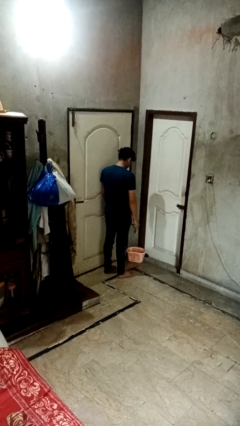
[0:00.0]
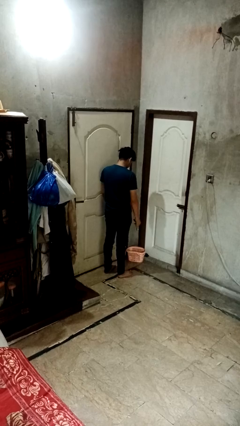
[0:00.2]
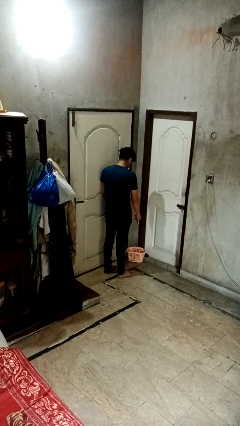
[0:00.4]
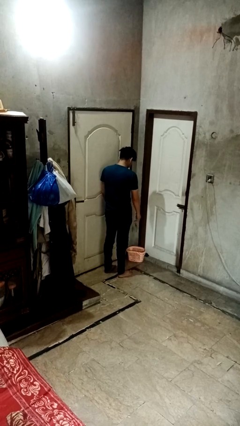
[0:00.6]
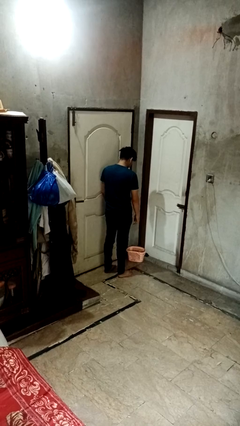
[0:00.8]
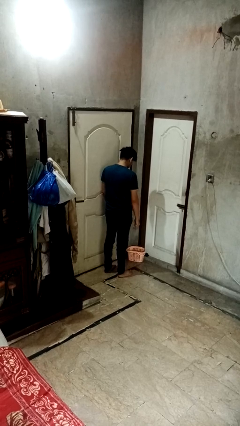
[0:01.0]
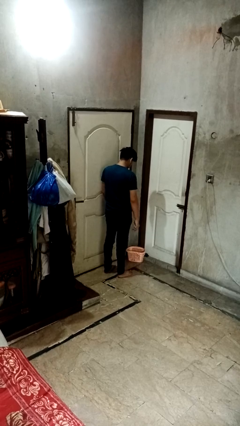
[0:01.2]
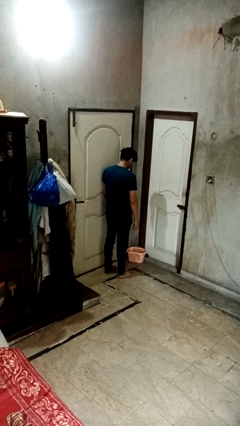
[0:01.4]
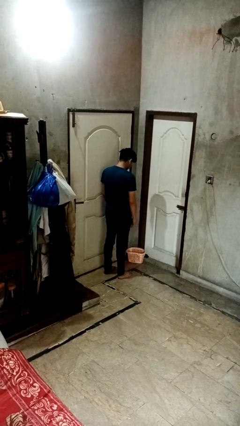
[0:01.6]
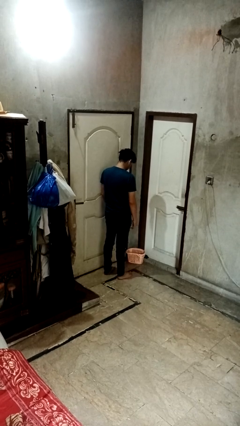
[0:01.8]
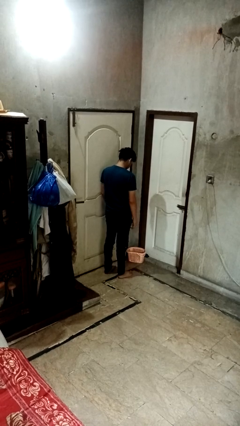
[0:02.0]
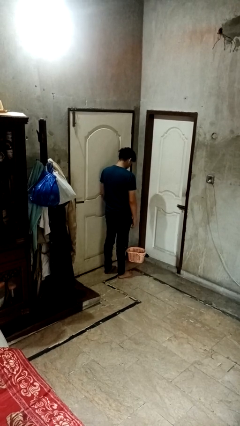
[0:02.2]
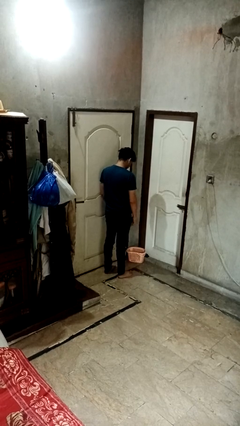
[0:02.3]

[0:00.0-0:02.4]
person discards trash

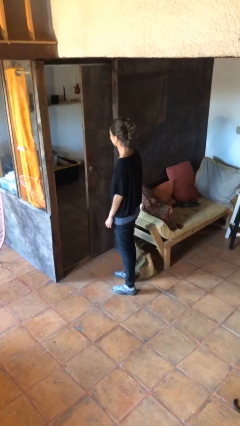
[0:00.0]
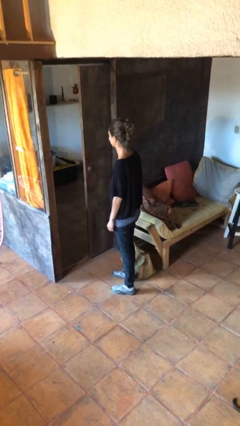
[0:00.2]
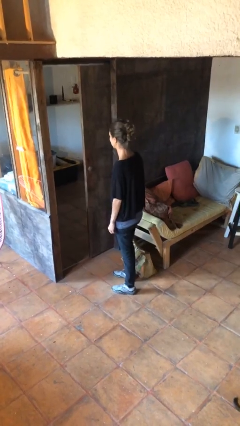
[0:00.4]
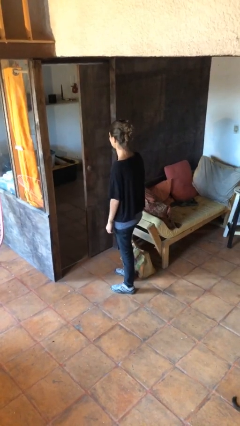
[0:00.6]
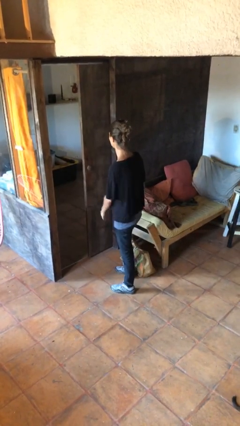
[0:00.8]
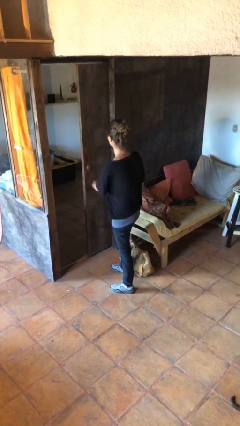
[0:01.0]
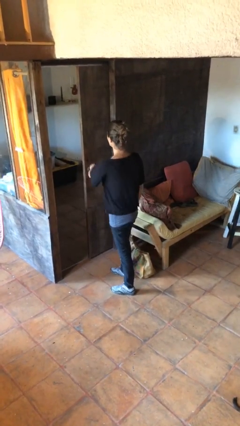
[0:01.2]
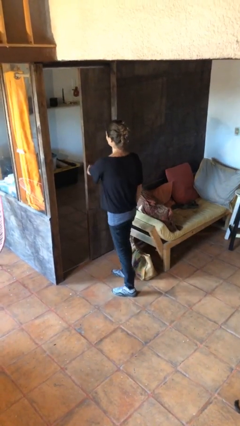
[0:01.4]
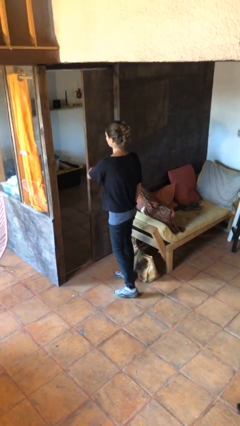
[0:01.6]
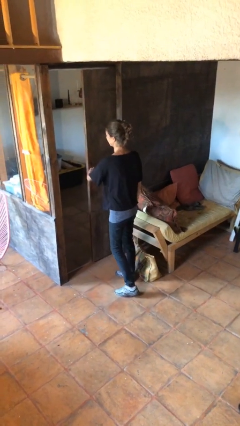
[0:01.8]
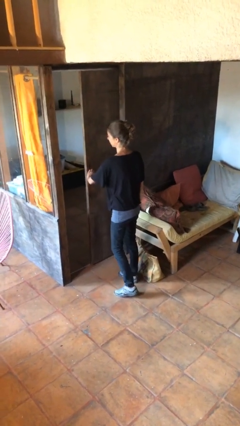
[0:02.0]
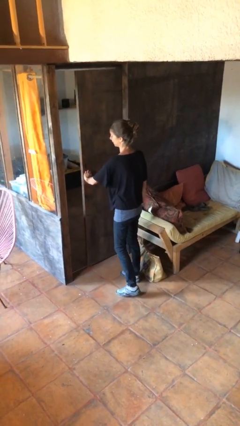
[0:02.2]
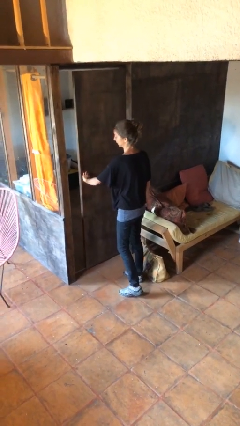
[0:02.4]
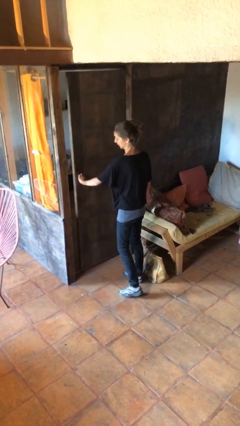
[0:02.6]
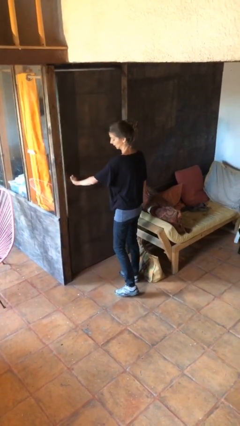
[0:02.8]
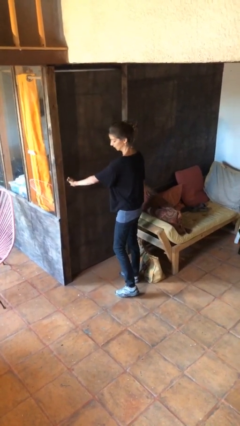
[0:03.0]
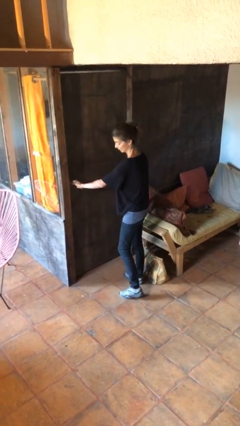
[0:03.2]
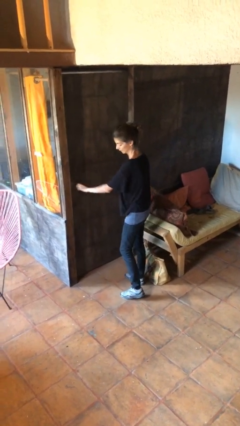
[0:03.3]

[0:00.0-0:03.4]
person closes sliding door

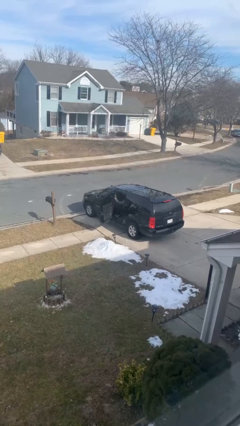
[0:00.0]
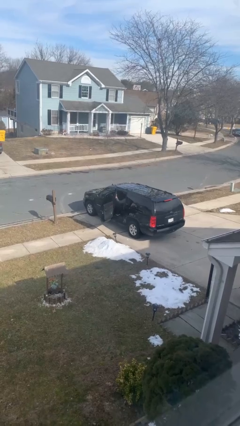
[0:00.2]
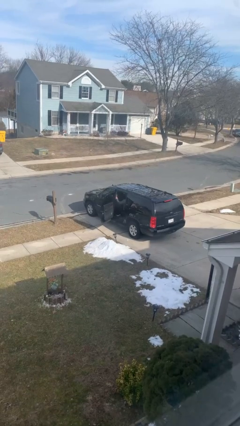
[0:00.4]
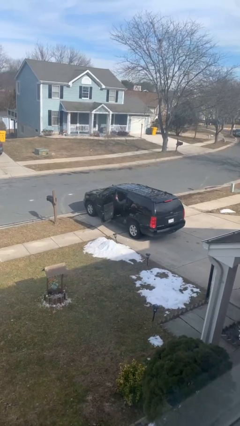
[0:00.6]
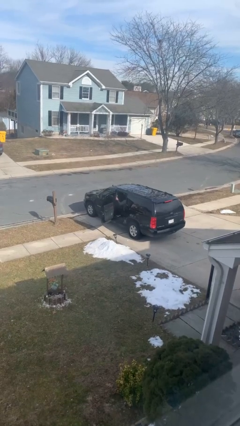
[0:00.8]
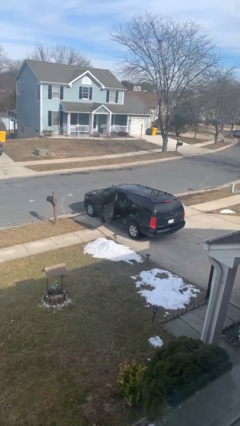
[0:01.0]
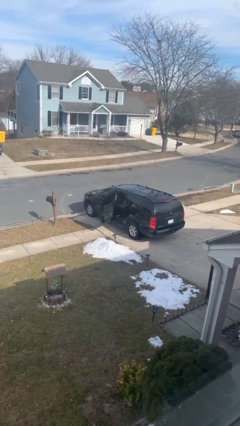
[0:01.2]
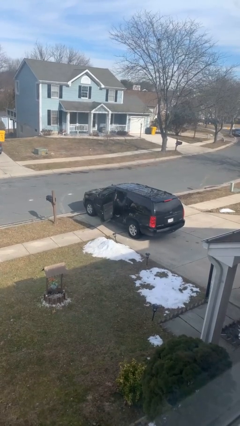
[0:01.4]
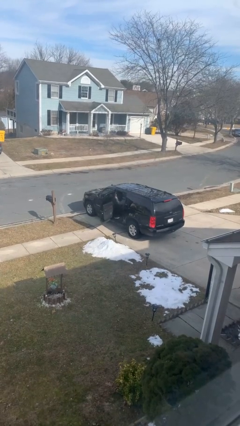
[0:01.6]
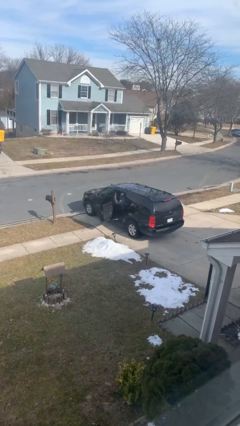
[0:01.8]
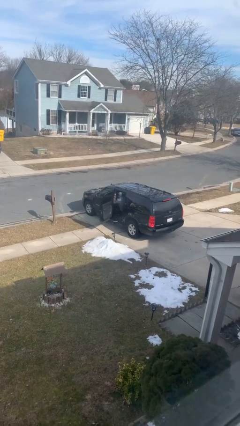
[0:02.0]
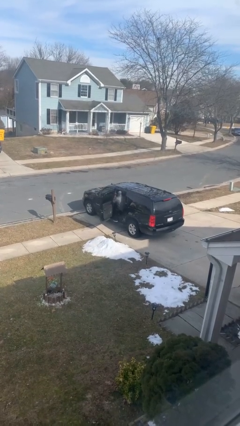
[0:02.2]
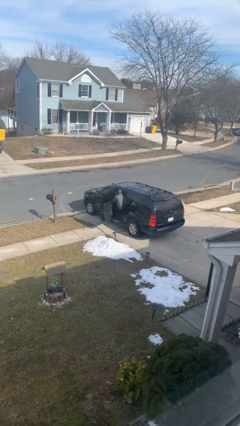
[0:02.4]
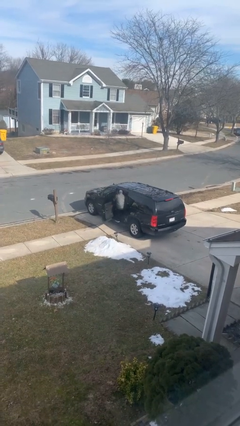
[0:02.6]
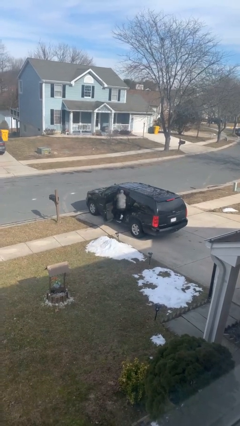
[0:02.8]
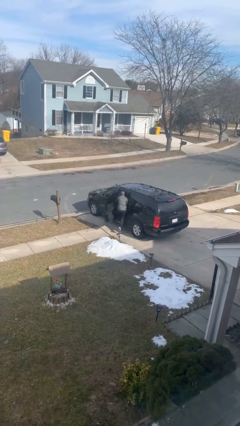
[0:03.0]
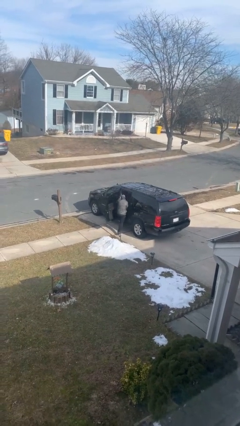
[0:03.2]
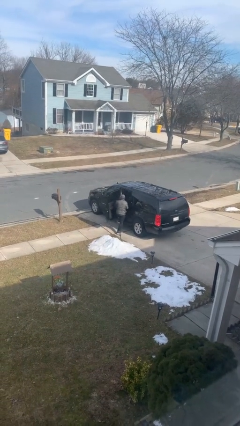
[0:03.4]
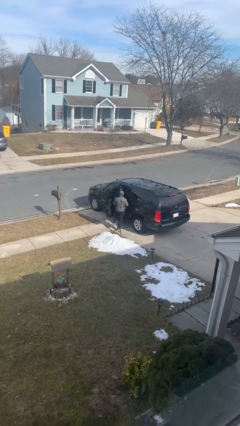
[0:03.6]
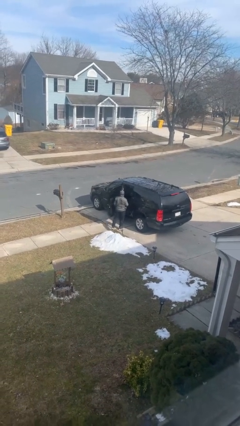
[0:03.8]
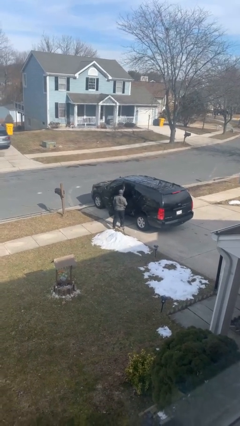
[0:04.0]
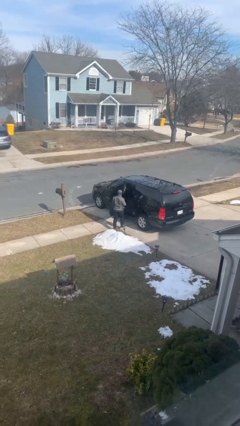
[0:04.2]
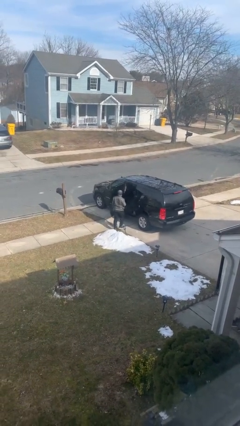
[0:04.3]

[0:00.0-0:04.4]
person exits car

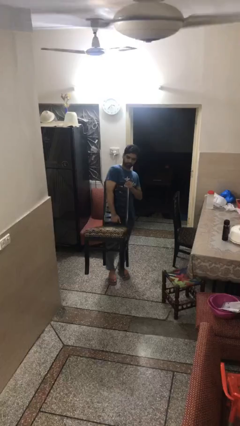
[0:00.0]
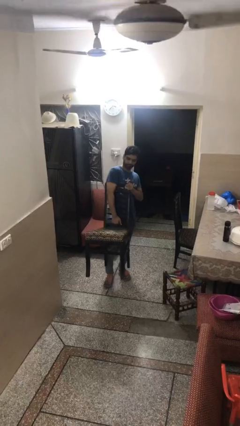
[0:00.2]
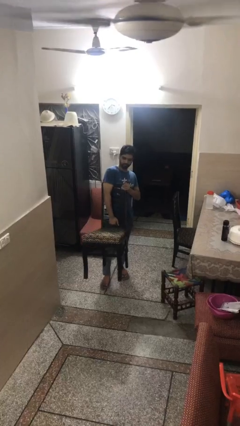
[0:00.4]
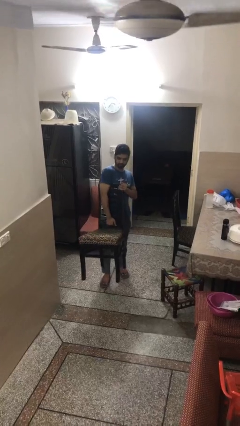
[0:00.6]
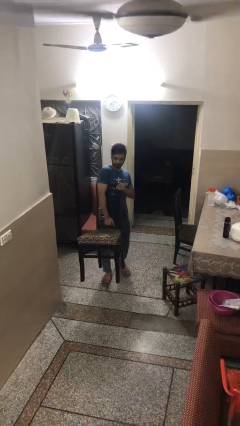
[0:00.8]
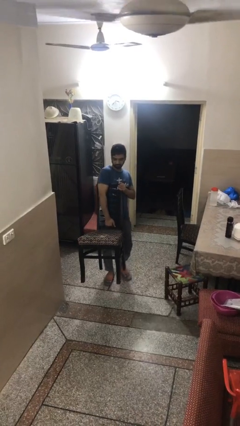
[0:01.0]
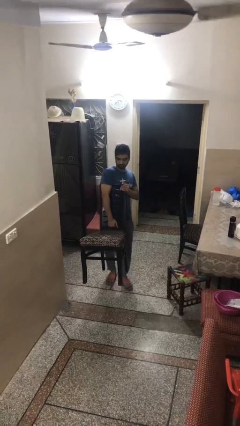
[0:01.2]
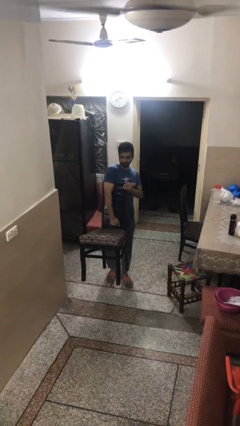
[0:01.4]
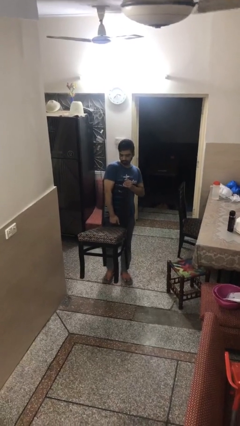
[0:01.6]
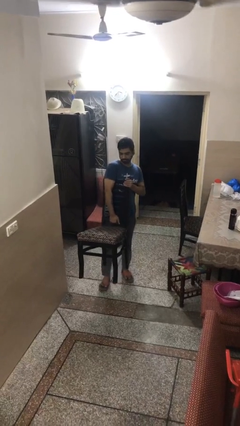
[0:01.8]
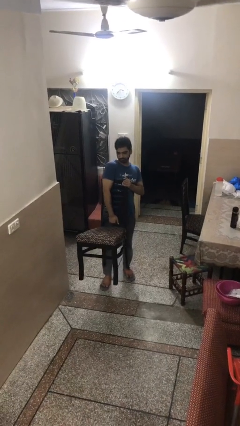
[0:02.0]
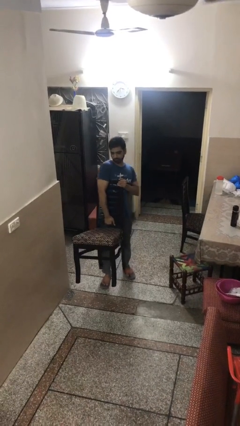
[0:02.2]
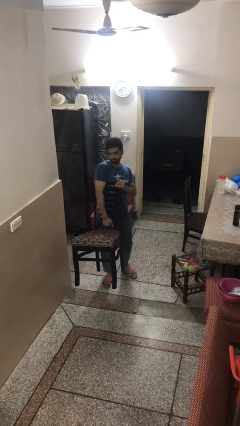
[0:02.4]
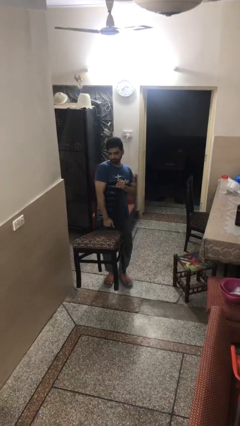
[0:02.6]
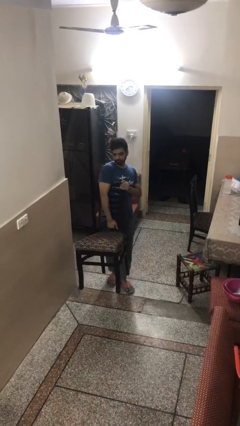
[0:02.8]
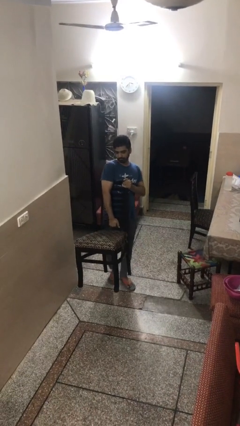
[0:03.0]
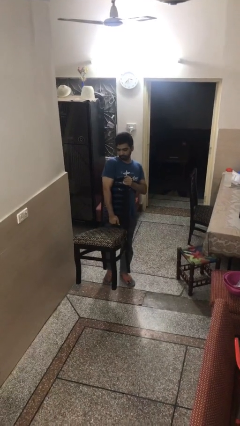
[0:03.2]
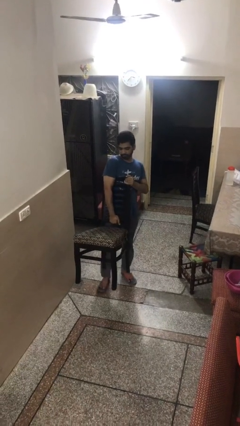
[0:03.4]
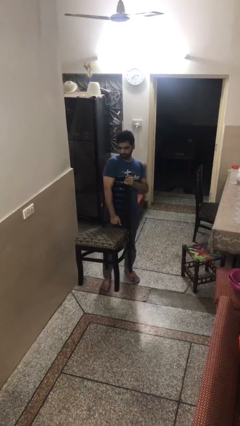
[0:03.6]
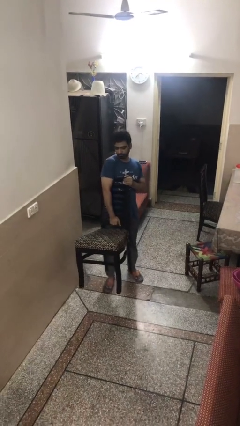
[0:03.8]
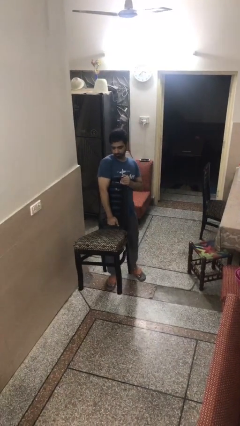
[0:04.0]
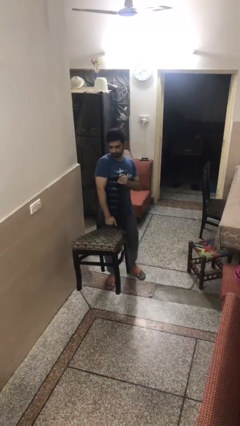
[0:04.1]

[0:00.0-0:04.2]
person carries heavy object

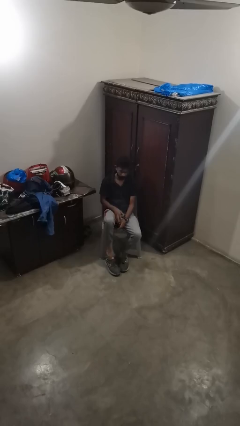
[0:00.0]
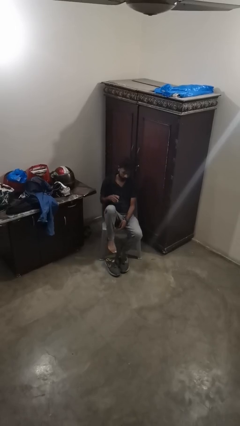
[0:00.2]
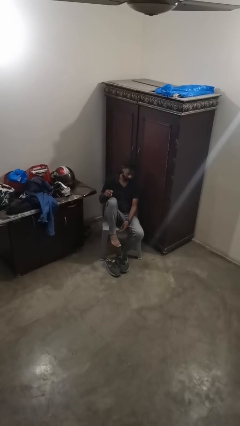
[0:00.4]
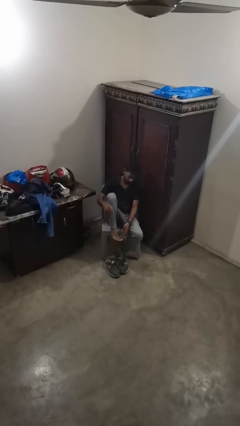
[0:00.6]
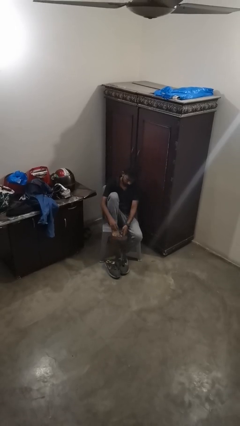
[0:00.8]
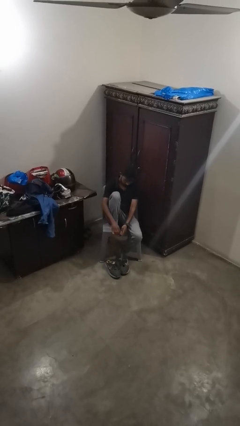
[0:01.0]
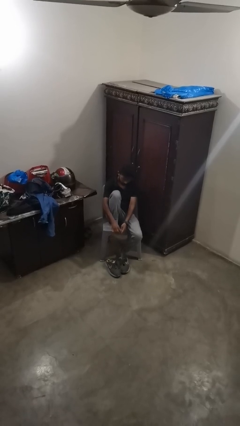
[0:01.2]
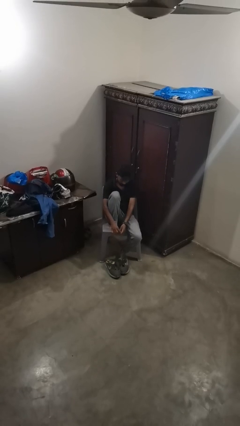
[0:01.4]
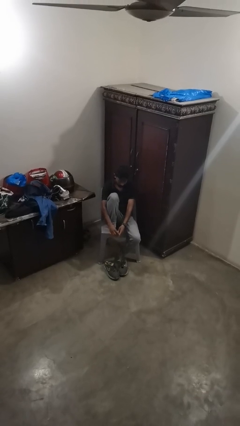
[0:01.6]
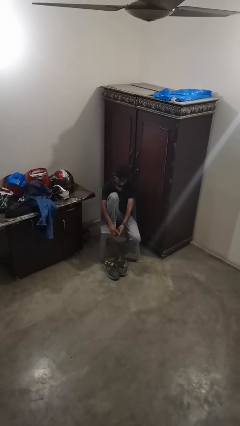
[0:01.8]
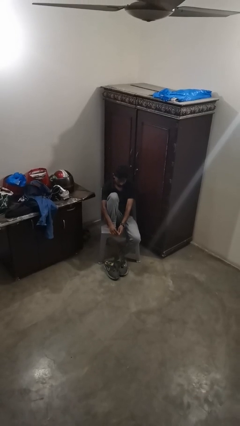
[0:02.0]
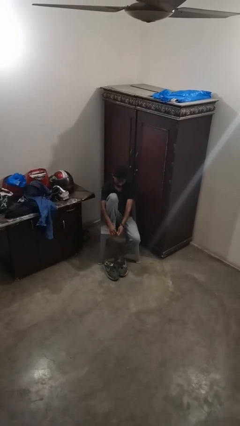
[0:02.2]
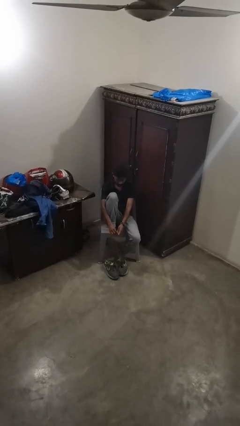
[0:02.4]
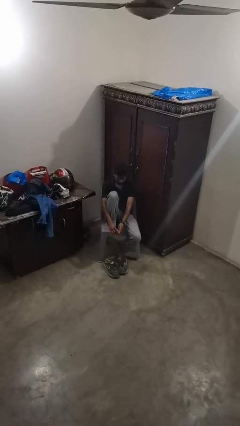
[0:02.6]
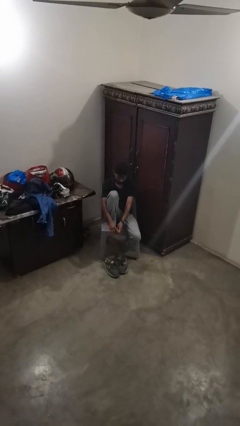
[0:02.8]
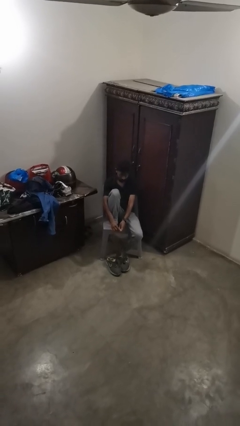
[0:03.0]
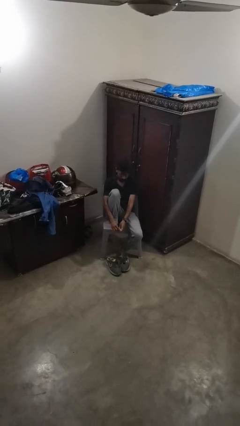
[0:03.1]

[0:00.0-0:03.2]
person rubs foot
